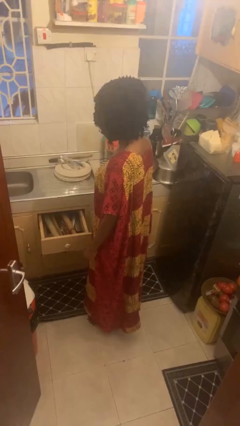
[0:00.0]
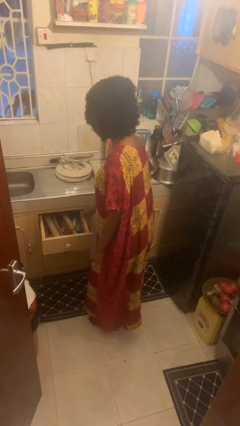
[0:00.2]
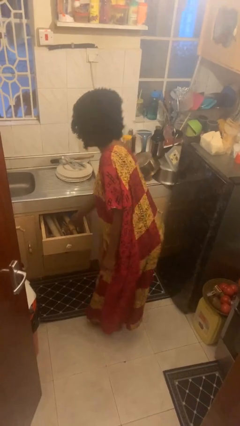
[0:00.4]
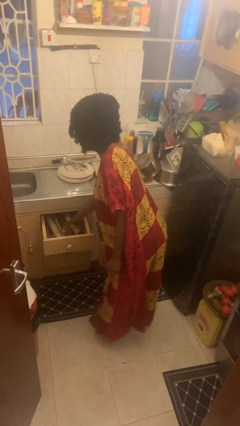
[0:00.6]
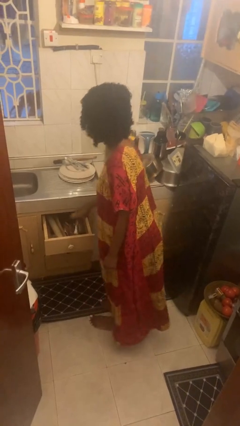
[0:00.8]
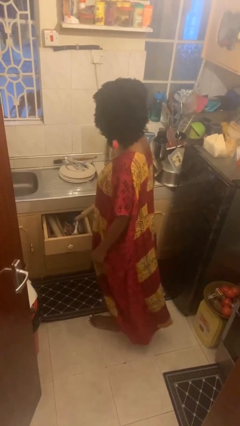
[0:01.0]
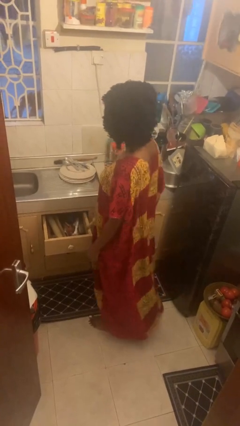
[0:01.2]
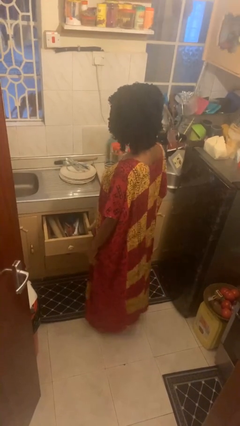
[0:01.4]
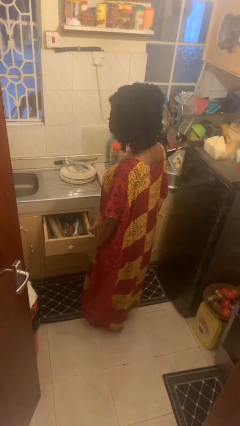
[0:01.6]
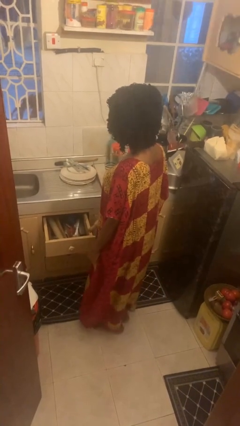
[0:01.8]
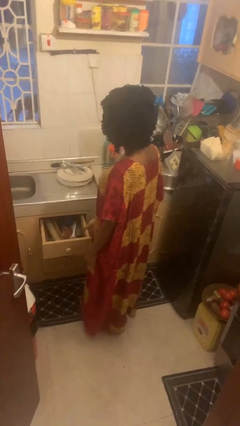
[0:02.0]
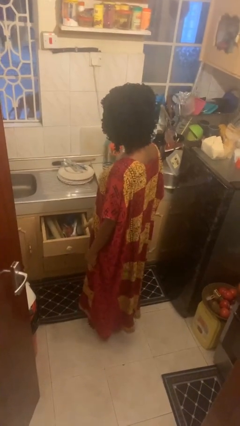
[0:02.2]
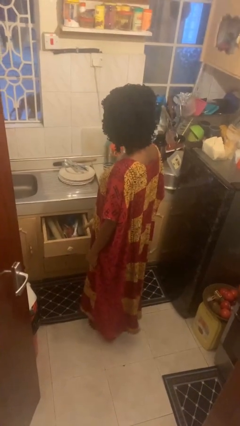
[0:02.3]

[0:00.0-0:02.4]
person takes object from kitchen drawer

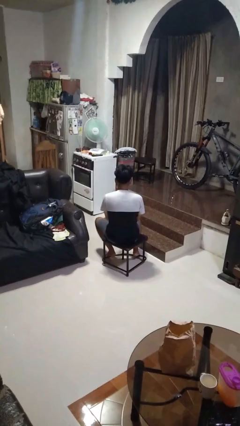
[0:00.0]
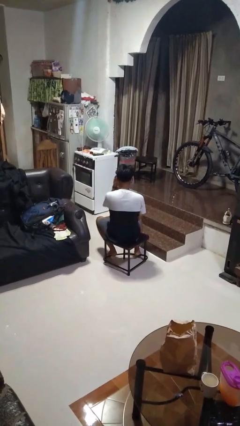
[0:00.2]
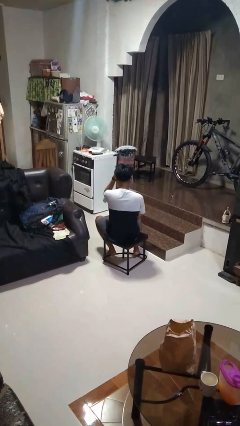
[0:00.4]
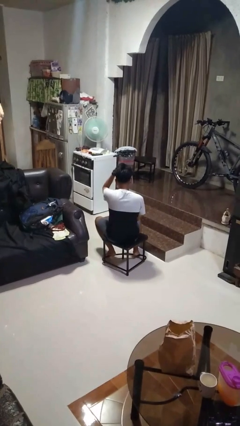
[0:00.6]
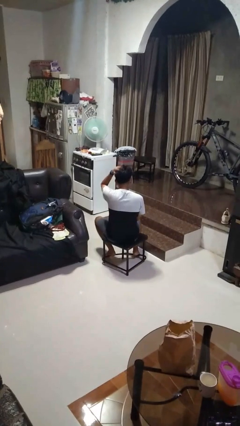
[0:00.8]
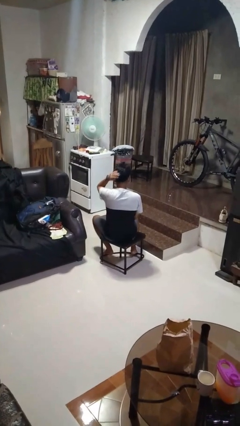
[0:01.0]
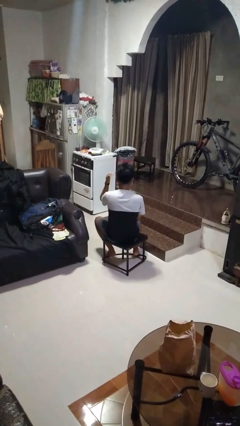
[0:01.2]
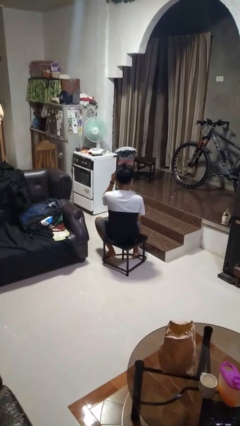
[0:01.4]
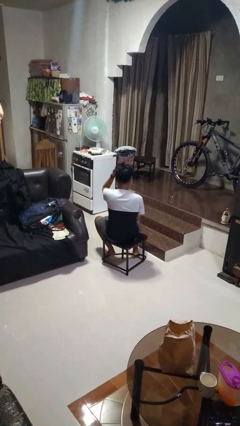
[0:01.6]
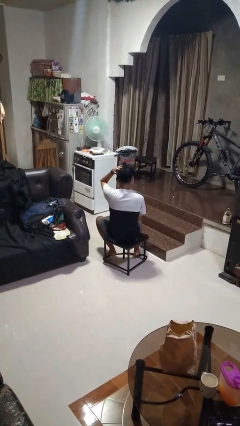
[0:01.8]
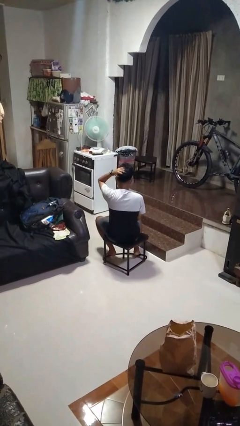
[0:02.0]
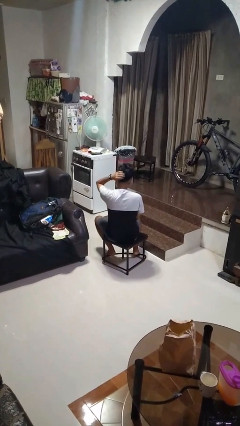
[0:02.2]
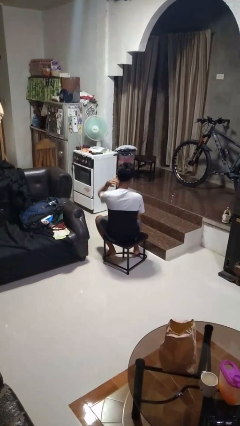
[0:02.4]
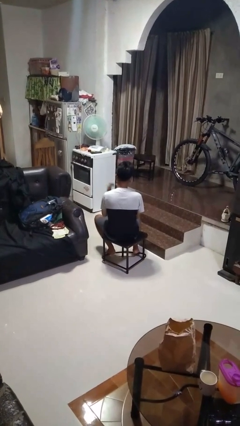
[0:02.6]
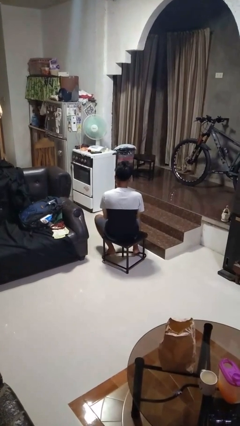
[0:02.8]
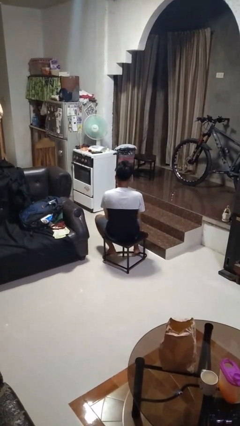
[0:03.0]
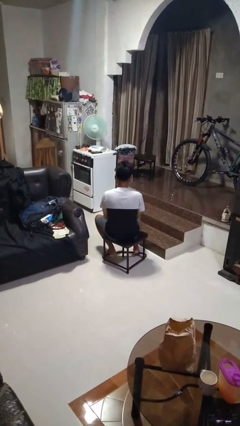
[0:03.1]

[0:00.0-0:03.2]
person strokes hair

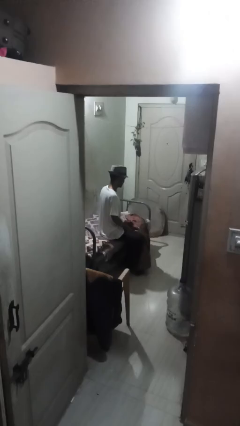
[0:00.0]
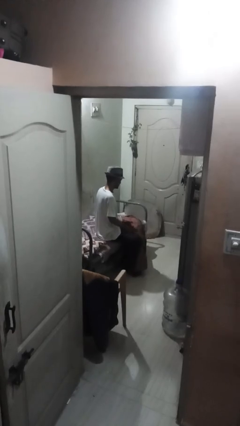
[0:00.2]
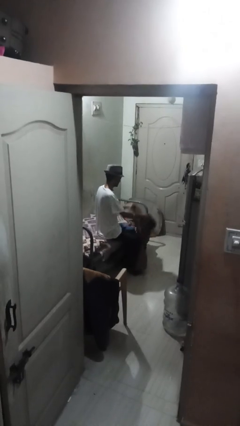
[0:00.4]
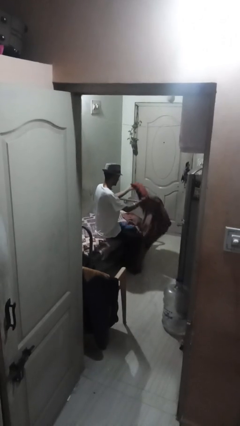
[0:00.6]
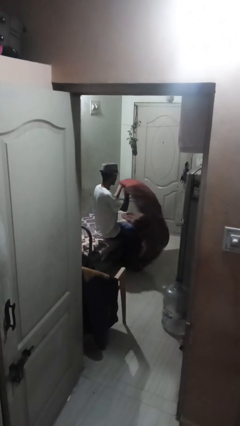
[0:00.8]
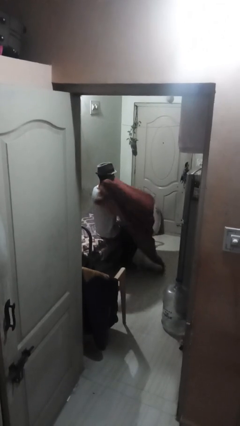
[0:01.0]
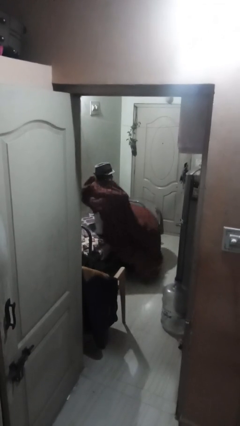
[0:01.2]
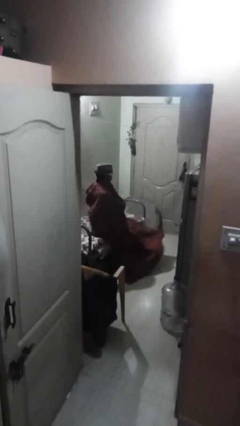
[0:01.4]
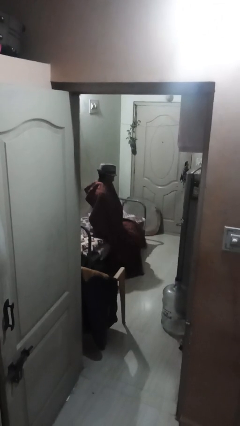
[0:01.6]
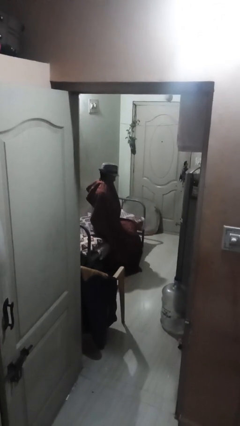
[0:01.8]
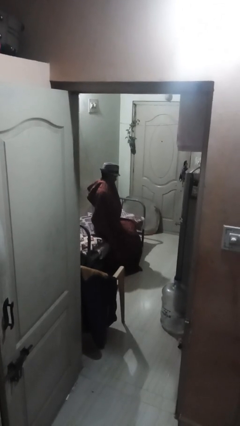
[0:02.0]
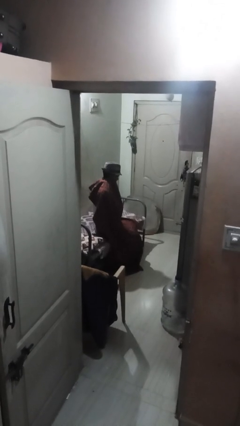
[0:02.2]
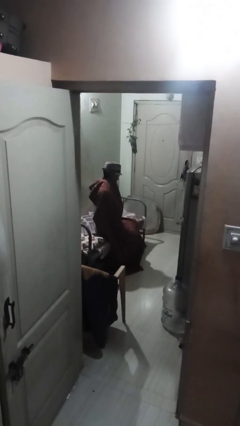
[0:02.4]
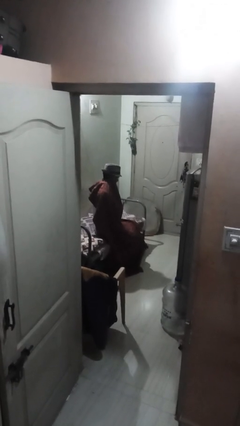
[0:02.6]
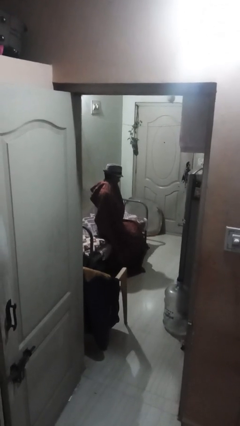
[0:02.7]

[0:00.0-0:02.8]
person covers with blanket

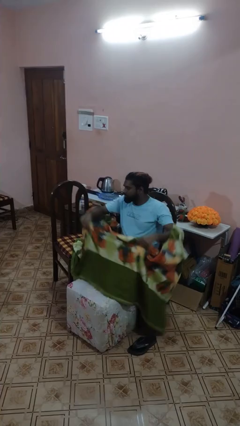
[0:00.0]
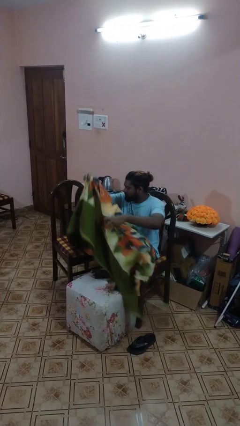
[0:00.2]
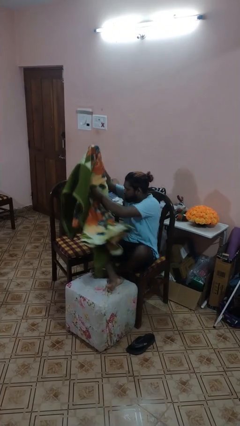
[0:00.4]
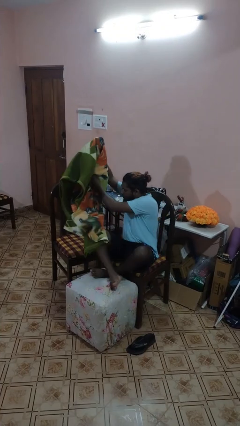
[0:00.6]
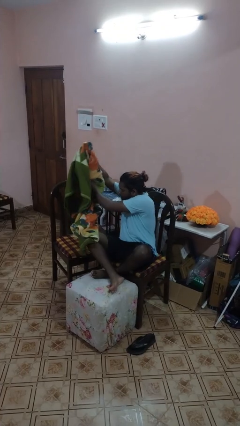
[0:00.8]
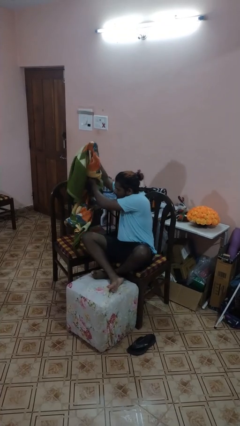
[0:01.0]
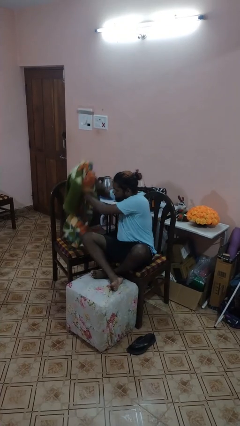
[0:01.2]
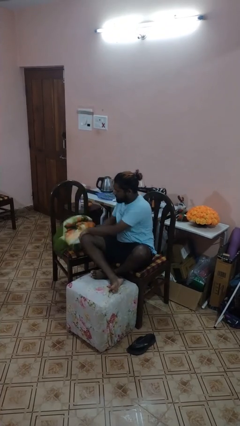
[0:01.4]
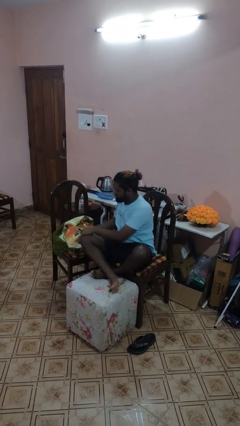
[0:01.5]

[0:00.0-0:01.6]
person uncovers with blanket

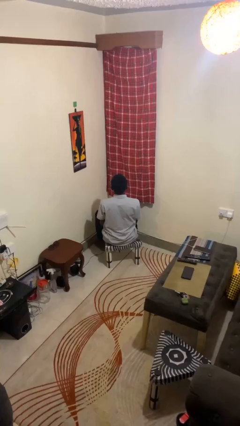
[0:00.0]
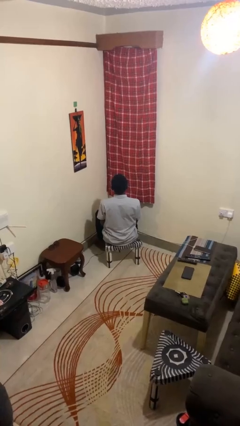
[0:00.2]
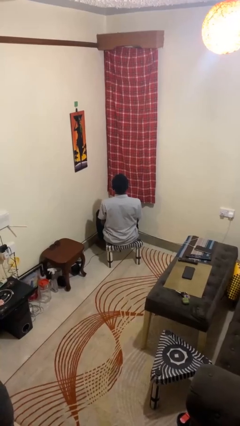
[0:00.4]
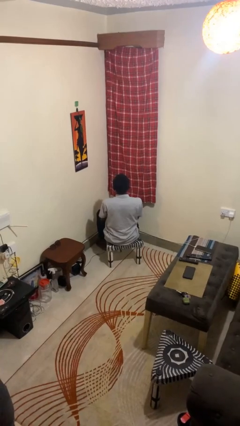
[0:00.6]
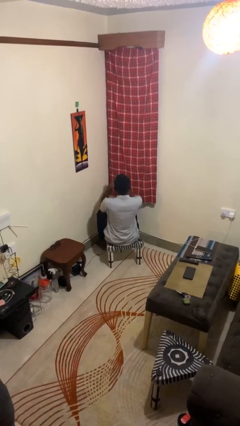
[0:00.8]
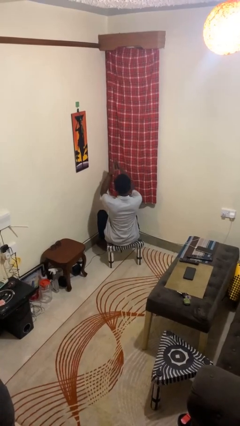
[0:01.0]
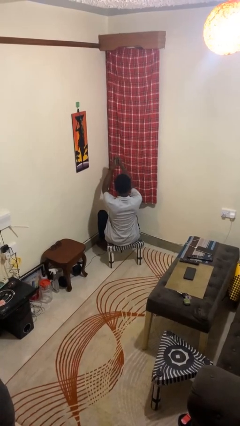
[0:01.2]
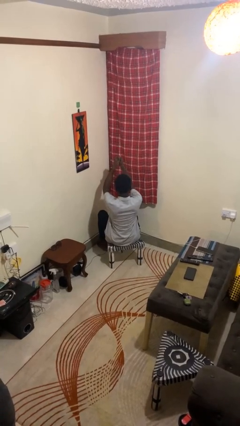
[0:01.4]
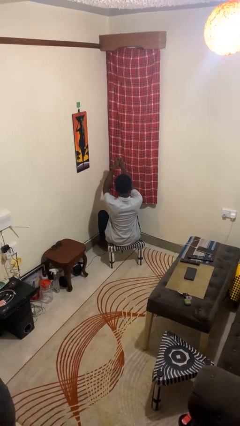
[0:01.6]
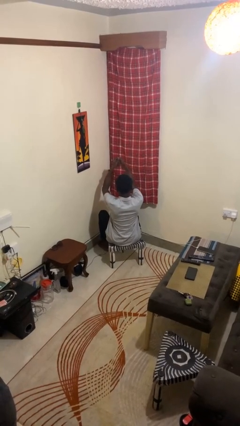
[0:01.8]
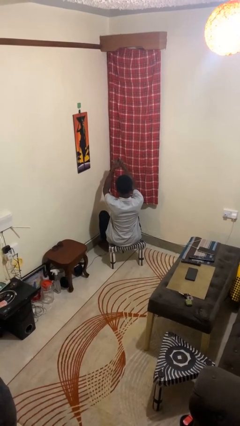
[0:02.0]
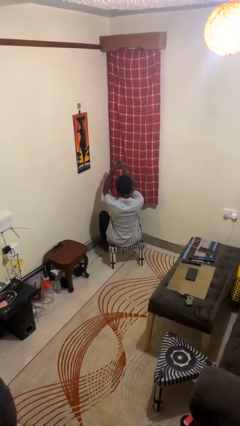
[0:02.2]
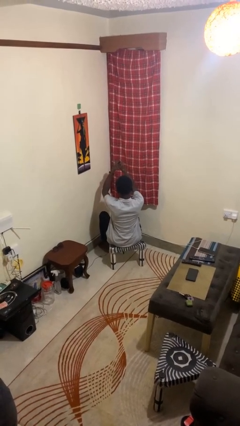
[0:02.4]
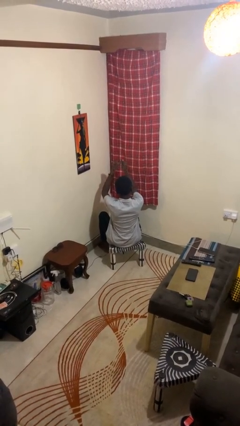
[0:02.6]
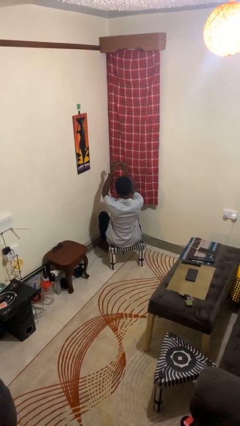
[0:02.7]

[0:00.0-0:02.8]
person cracks knuckles

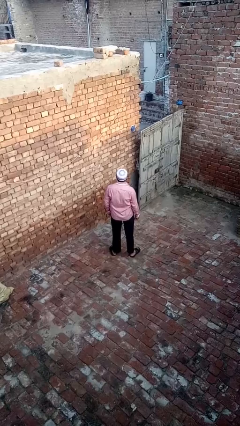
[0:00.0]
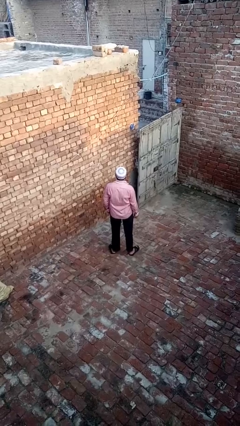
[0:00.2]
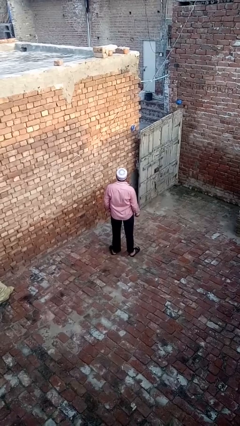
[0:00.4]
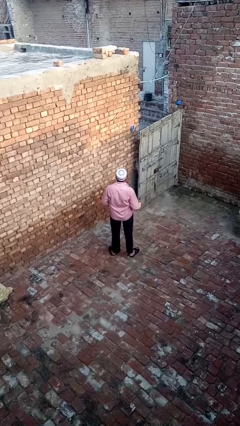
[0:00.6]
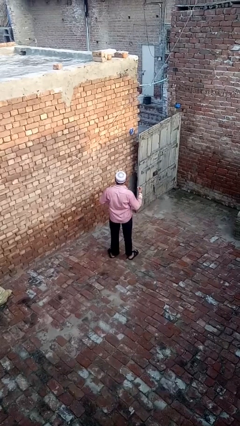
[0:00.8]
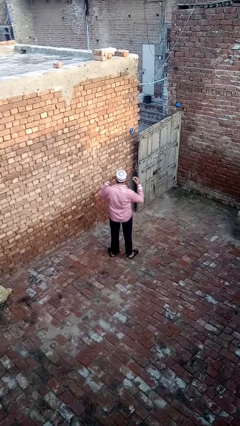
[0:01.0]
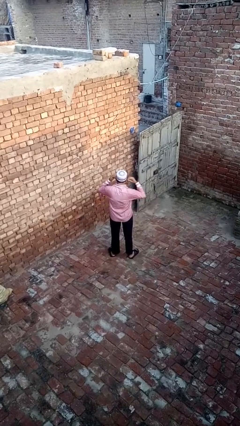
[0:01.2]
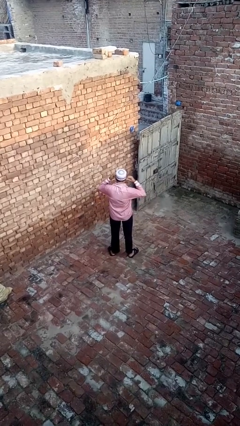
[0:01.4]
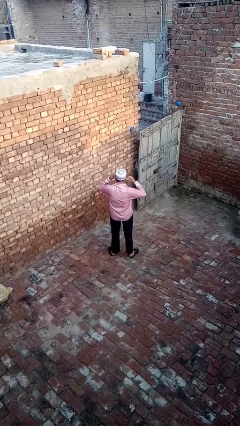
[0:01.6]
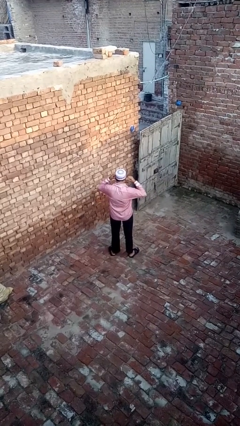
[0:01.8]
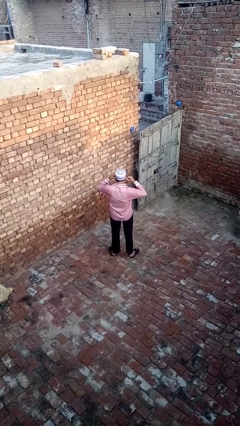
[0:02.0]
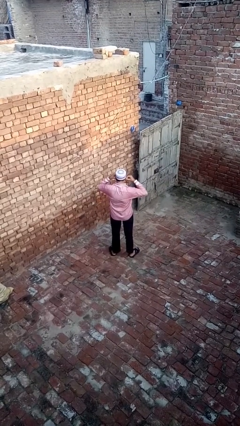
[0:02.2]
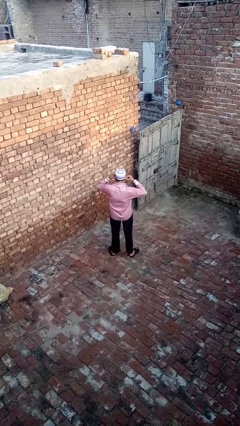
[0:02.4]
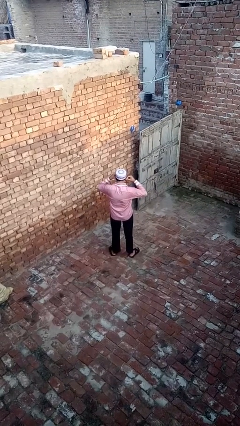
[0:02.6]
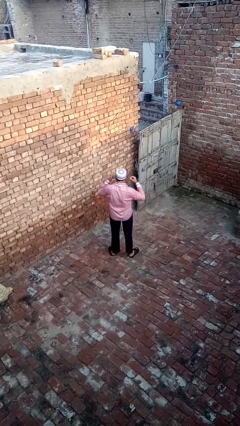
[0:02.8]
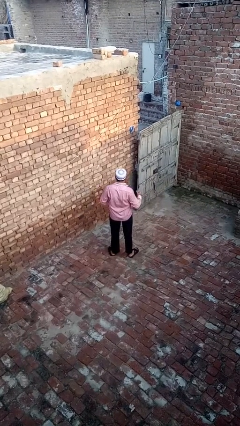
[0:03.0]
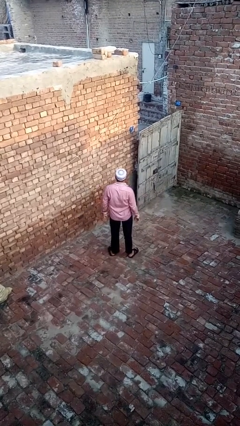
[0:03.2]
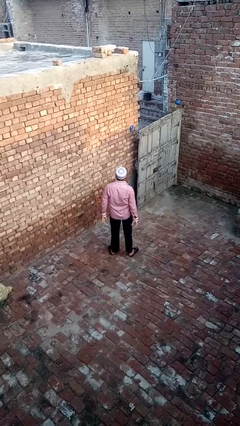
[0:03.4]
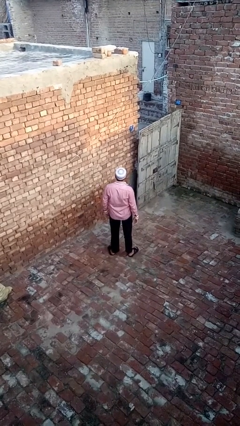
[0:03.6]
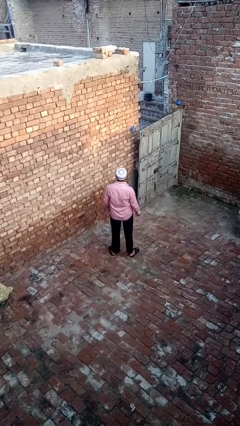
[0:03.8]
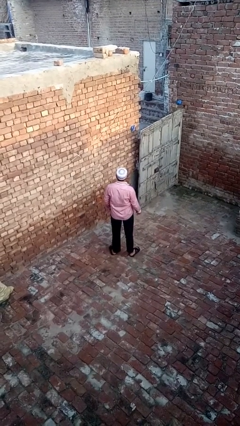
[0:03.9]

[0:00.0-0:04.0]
person puts on headphones

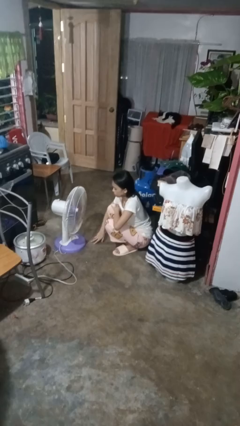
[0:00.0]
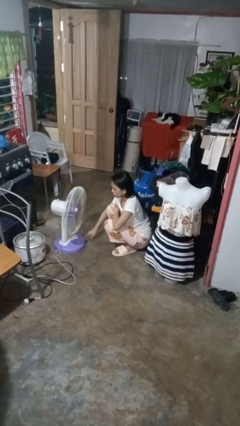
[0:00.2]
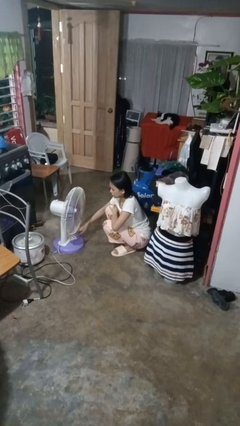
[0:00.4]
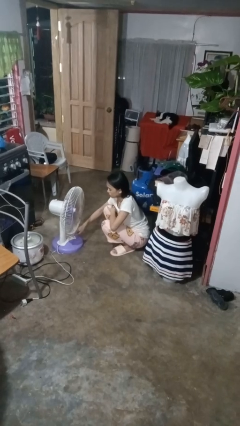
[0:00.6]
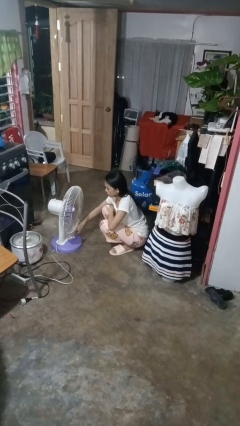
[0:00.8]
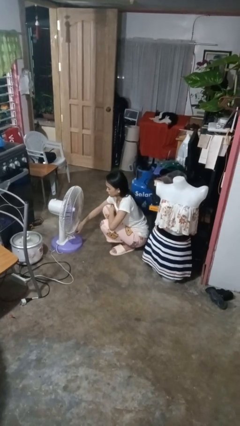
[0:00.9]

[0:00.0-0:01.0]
person turns on fan
